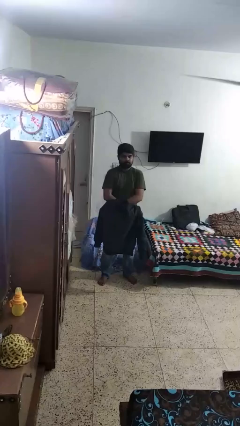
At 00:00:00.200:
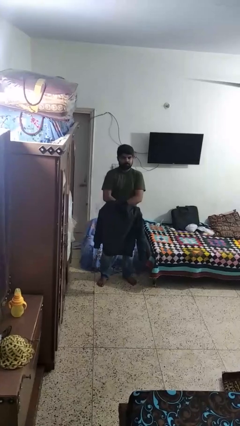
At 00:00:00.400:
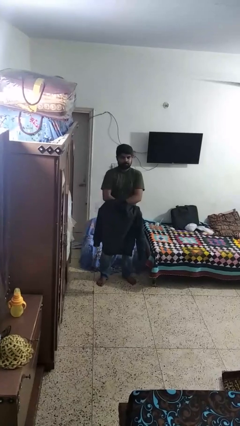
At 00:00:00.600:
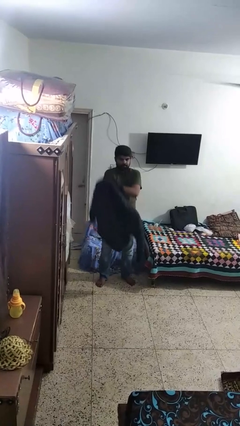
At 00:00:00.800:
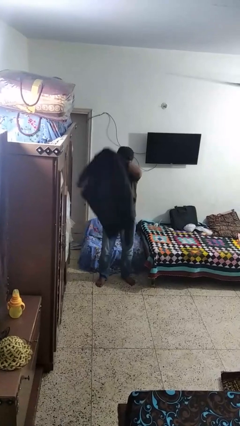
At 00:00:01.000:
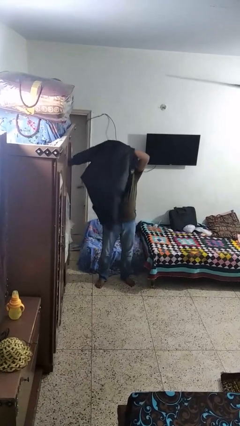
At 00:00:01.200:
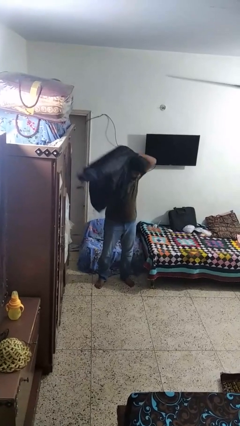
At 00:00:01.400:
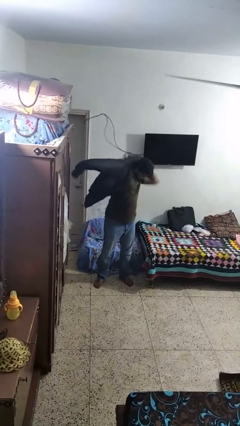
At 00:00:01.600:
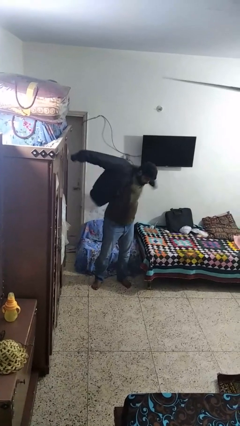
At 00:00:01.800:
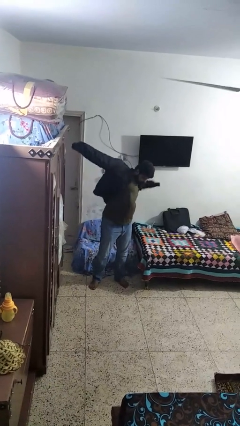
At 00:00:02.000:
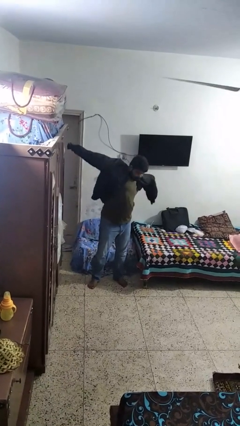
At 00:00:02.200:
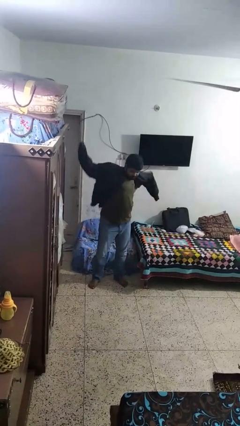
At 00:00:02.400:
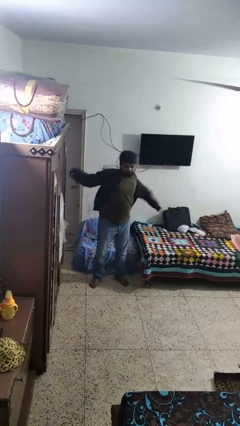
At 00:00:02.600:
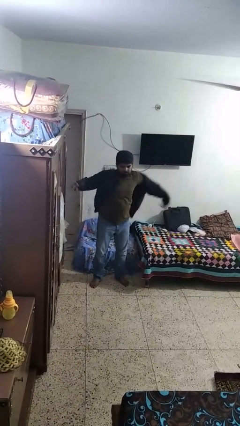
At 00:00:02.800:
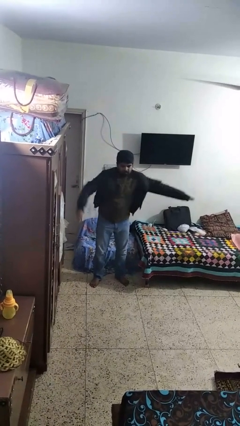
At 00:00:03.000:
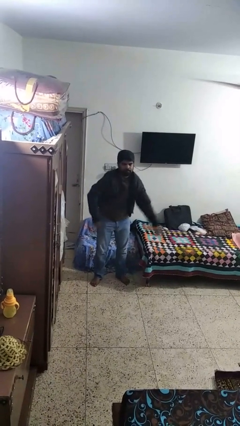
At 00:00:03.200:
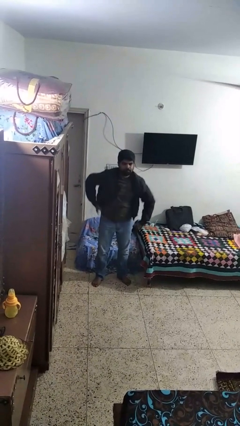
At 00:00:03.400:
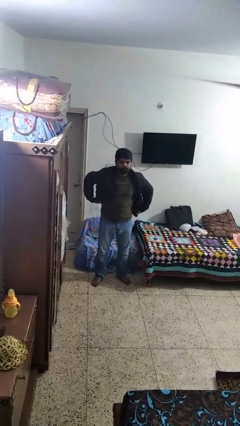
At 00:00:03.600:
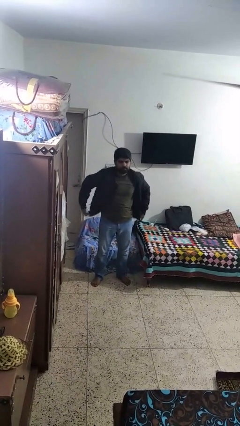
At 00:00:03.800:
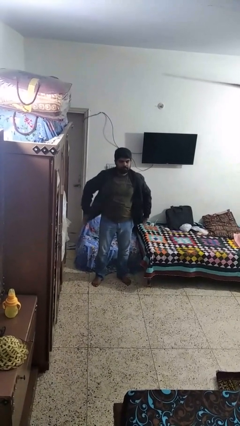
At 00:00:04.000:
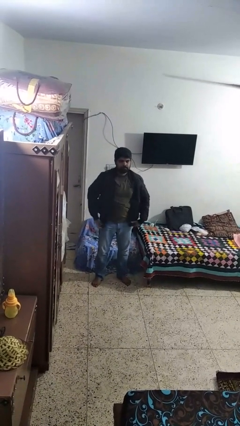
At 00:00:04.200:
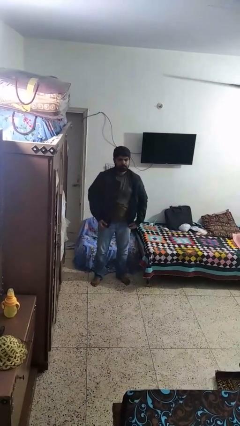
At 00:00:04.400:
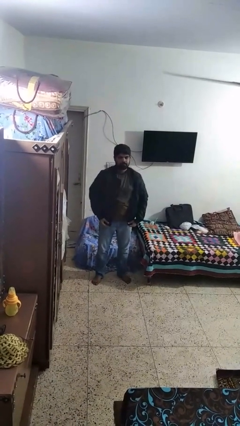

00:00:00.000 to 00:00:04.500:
person puts on jacket

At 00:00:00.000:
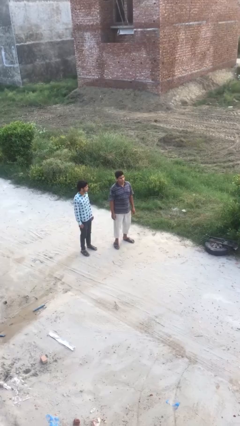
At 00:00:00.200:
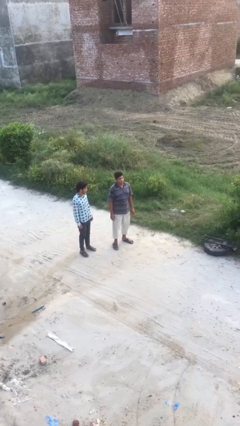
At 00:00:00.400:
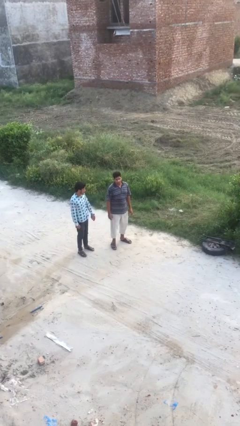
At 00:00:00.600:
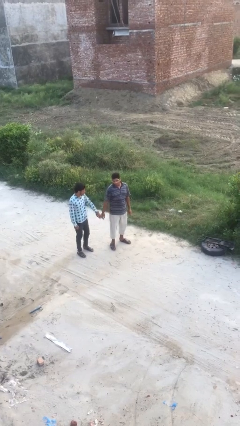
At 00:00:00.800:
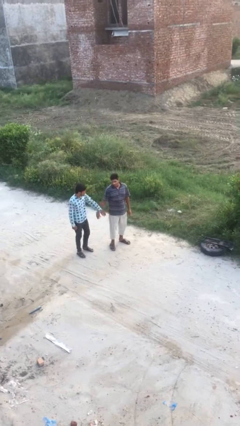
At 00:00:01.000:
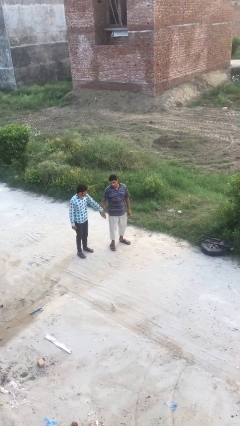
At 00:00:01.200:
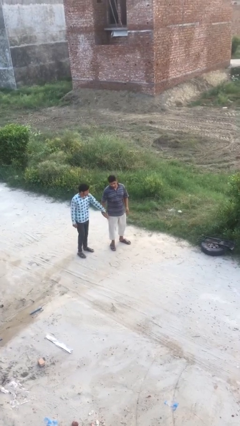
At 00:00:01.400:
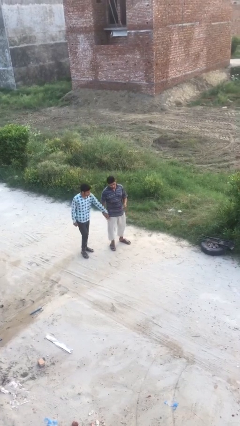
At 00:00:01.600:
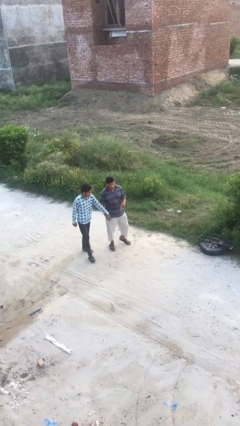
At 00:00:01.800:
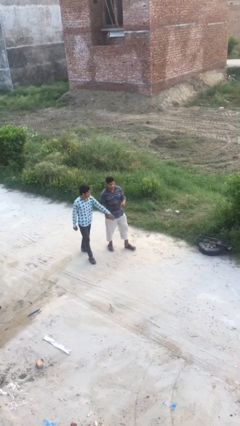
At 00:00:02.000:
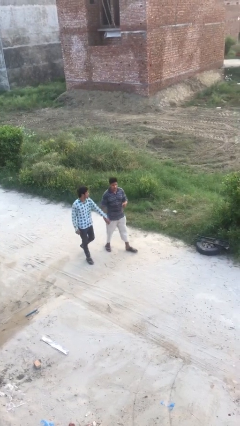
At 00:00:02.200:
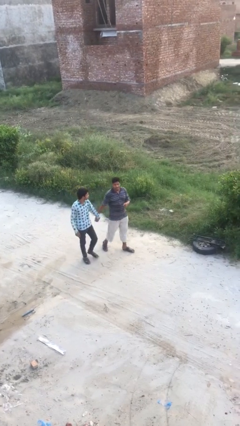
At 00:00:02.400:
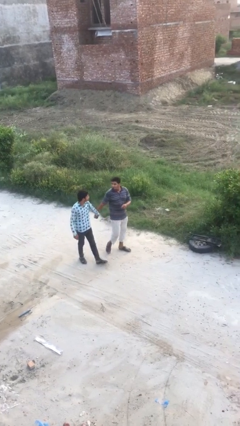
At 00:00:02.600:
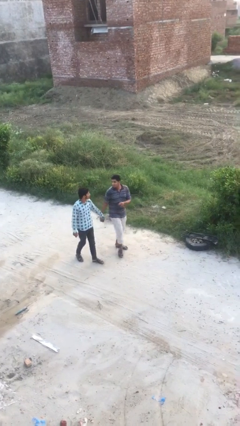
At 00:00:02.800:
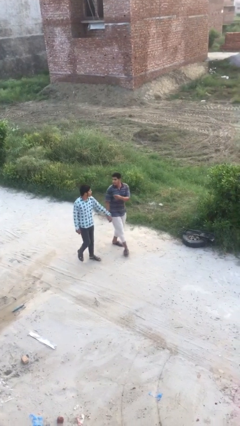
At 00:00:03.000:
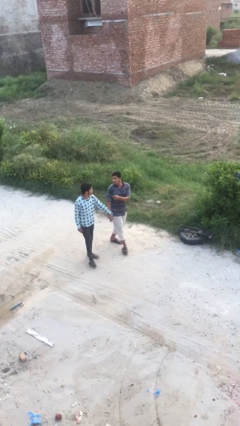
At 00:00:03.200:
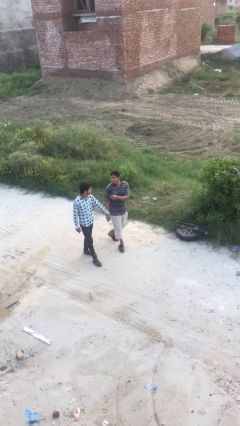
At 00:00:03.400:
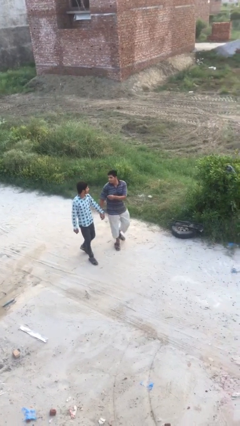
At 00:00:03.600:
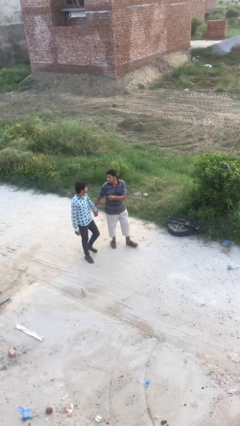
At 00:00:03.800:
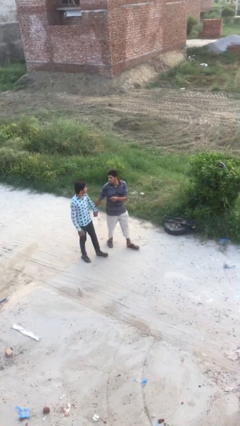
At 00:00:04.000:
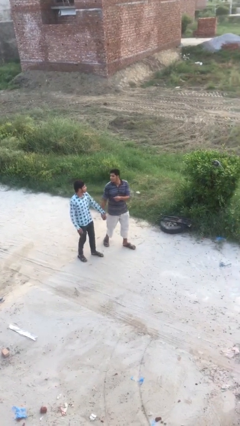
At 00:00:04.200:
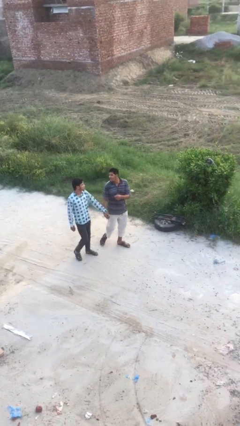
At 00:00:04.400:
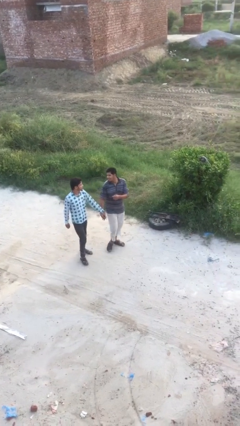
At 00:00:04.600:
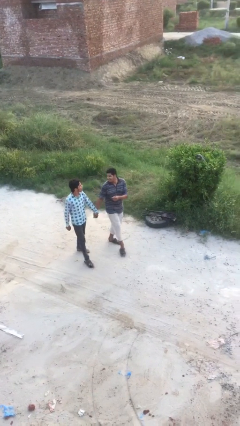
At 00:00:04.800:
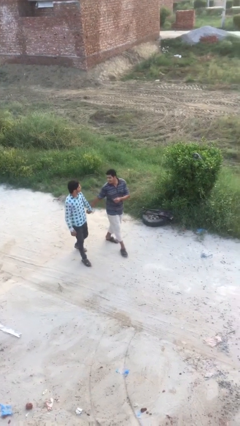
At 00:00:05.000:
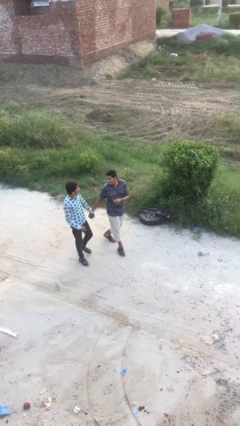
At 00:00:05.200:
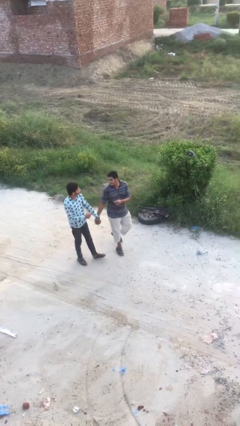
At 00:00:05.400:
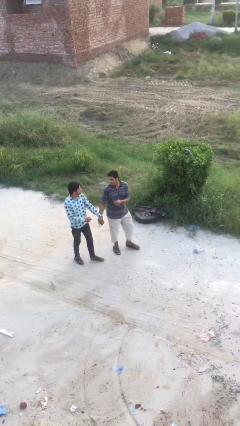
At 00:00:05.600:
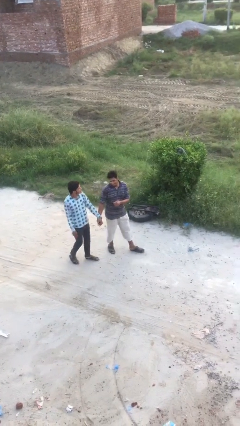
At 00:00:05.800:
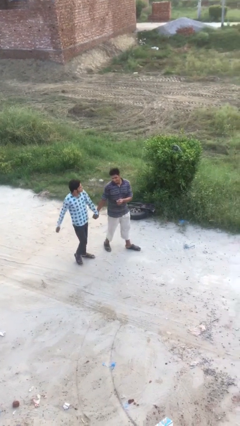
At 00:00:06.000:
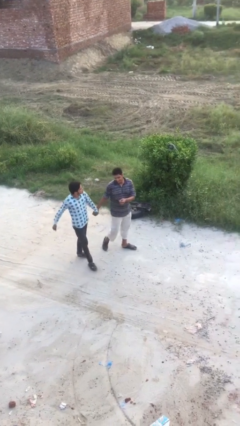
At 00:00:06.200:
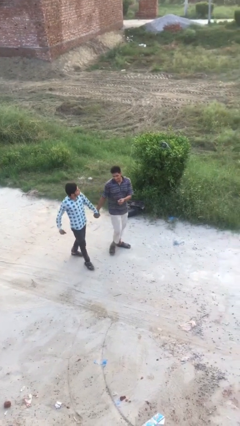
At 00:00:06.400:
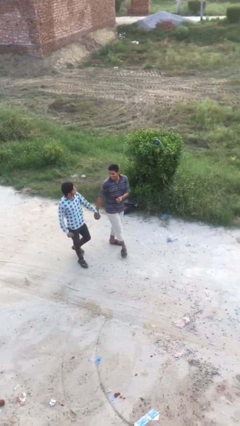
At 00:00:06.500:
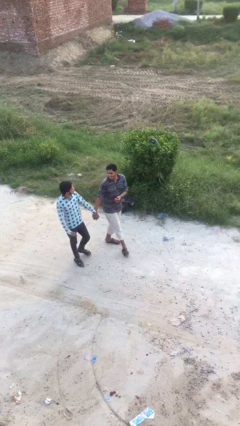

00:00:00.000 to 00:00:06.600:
person holds hand

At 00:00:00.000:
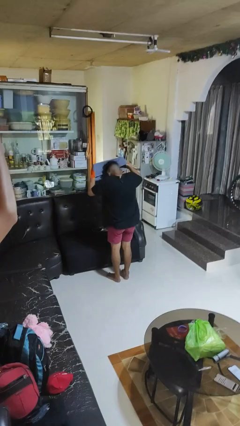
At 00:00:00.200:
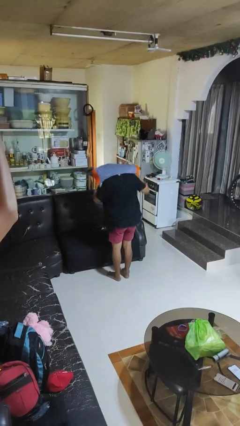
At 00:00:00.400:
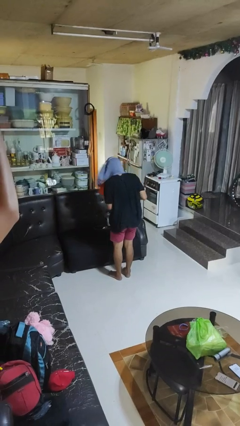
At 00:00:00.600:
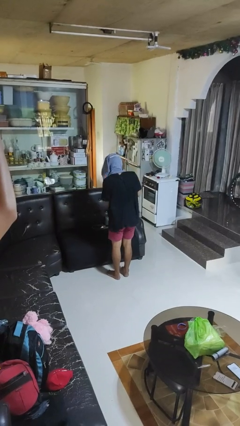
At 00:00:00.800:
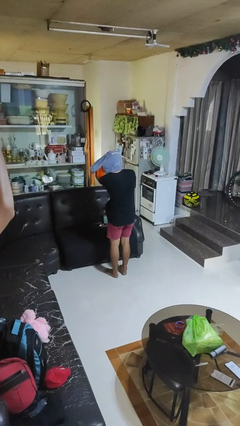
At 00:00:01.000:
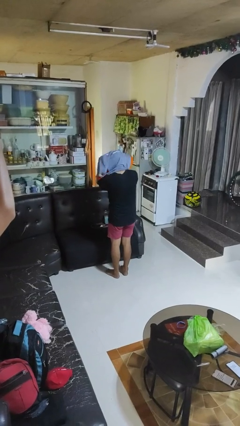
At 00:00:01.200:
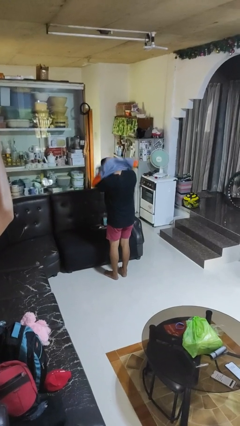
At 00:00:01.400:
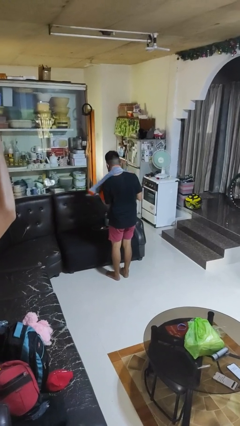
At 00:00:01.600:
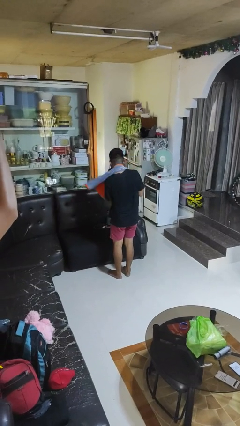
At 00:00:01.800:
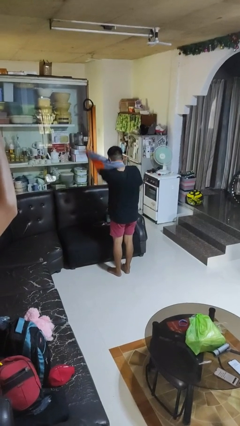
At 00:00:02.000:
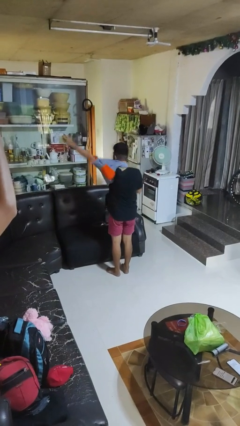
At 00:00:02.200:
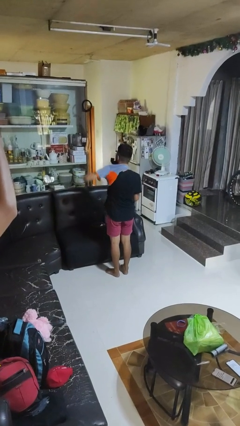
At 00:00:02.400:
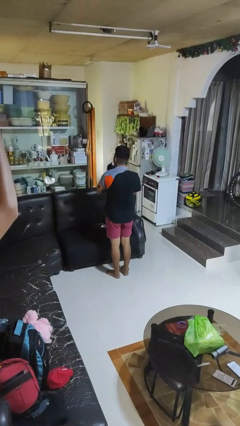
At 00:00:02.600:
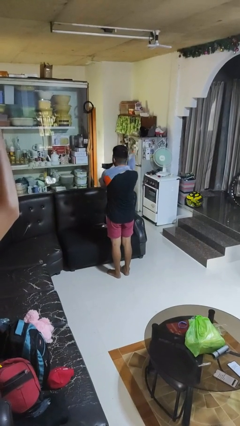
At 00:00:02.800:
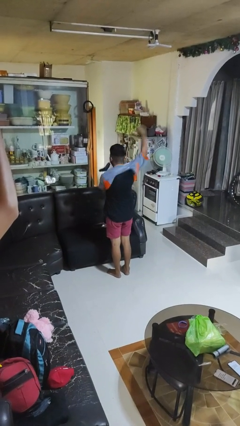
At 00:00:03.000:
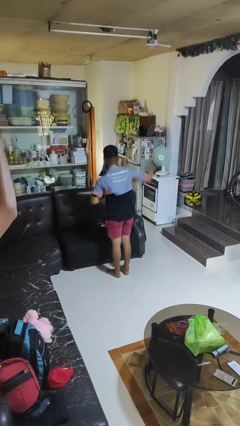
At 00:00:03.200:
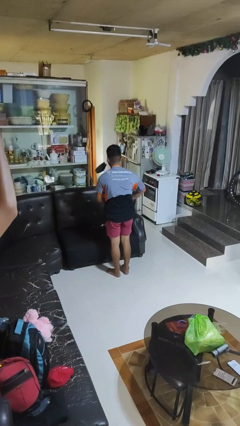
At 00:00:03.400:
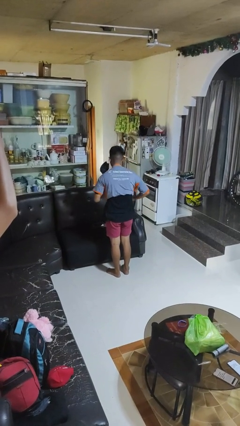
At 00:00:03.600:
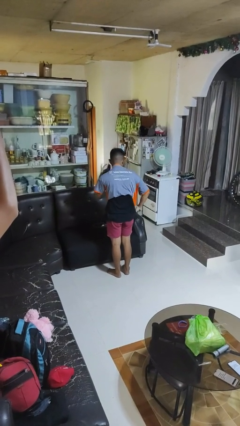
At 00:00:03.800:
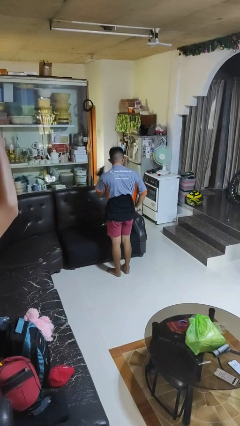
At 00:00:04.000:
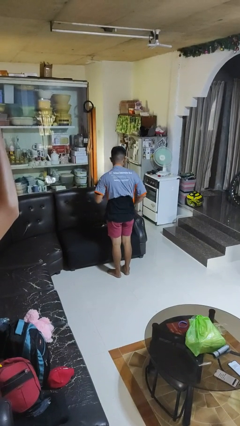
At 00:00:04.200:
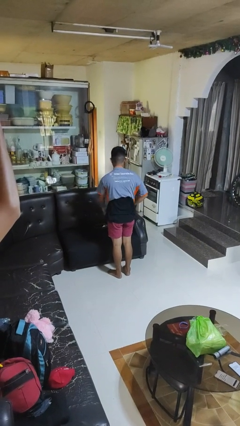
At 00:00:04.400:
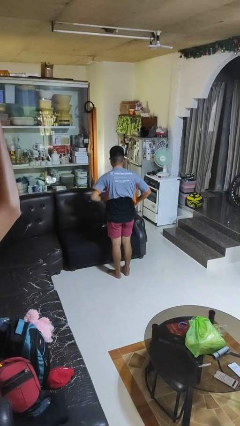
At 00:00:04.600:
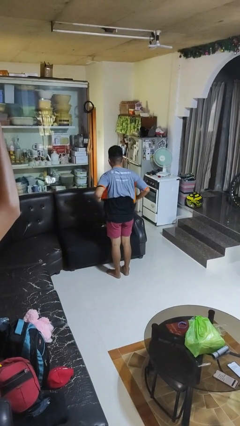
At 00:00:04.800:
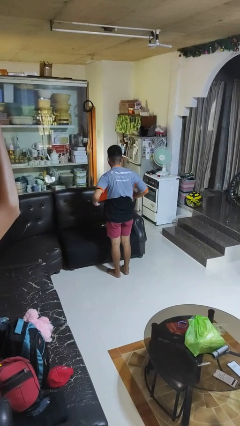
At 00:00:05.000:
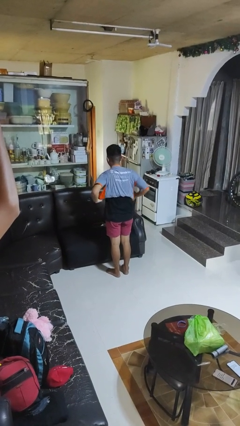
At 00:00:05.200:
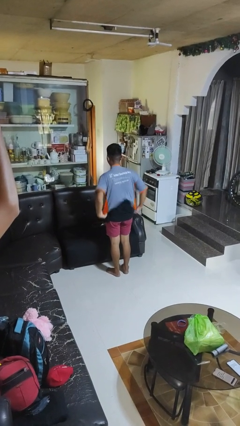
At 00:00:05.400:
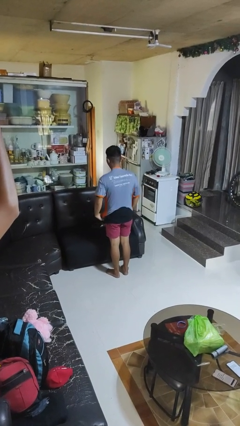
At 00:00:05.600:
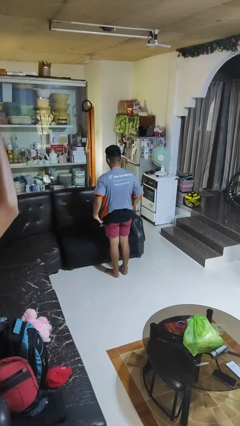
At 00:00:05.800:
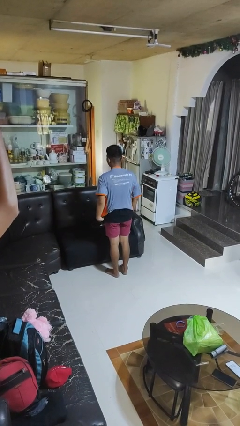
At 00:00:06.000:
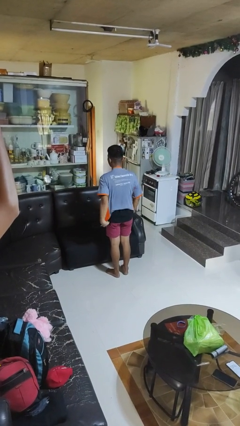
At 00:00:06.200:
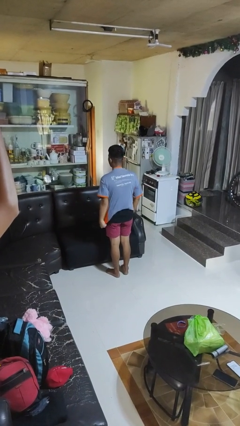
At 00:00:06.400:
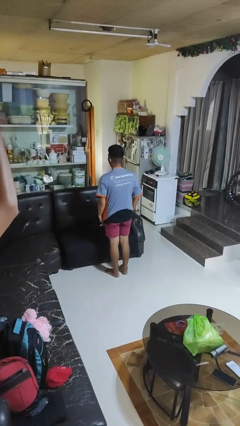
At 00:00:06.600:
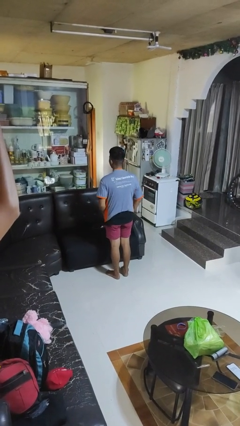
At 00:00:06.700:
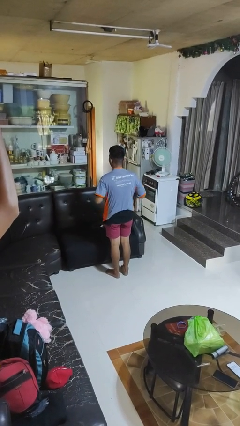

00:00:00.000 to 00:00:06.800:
person puts on shirt

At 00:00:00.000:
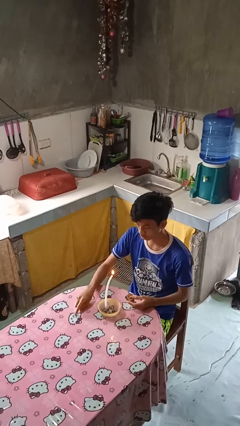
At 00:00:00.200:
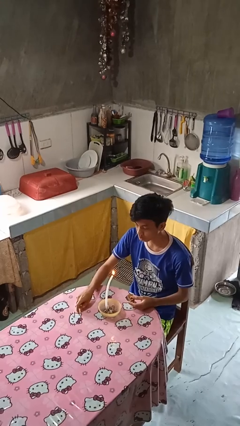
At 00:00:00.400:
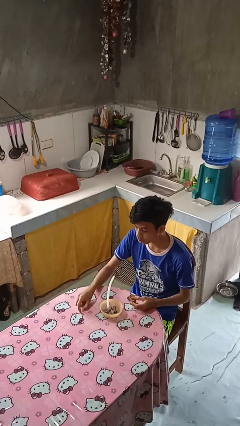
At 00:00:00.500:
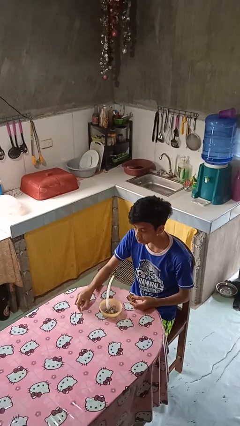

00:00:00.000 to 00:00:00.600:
person extinguishes candle
